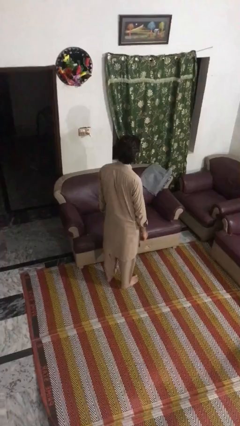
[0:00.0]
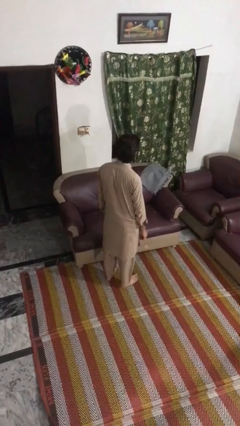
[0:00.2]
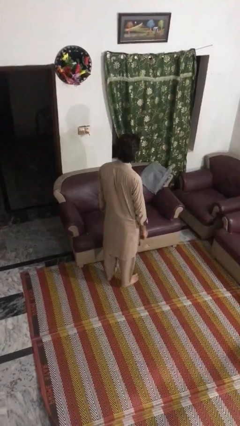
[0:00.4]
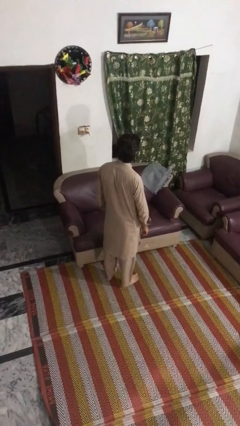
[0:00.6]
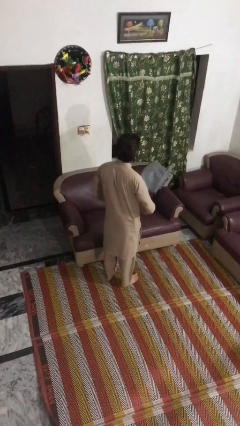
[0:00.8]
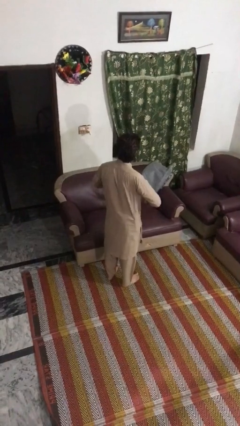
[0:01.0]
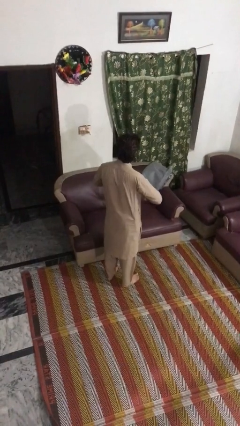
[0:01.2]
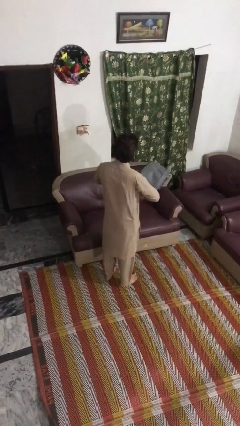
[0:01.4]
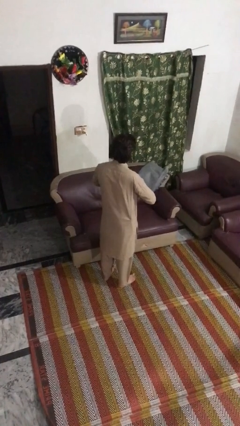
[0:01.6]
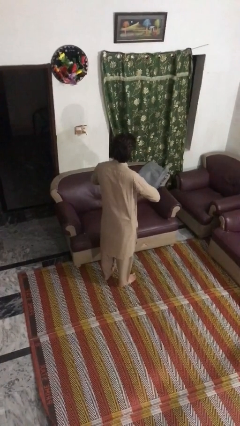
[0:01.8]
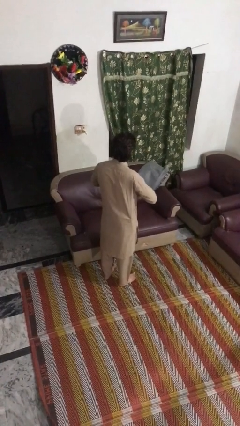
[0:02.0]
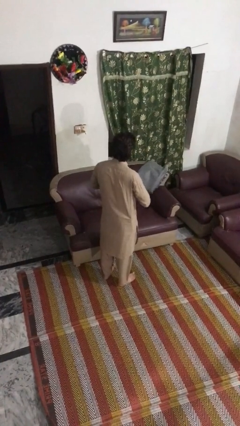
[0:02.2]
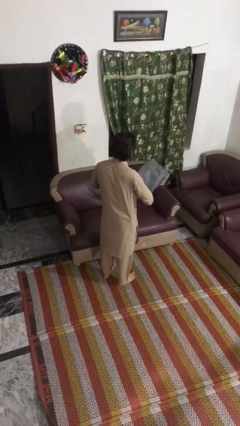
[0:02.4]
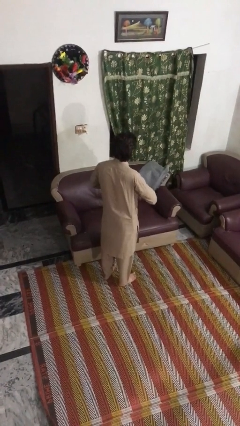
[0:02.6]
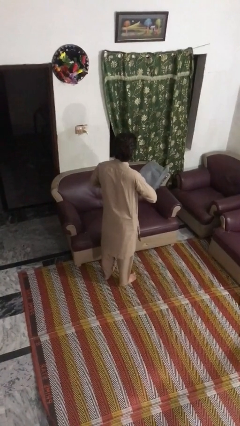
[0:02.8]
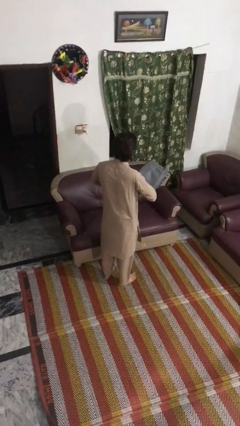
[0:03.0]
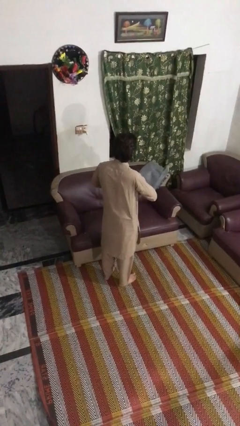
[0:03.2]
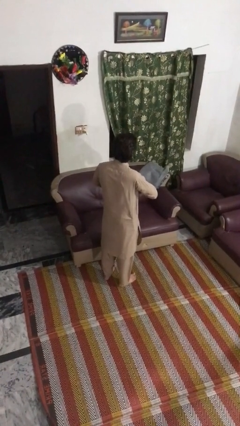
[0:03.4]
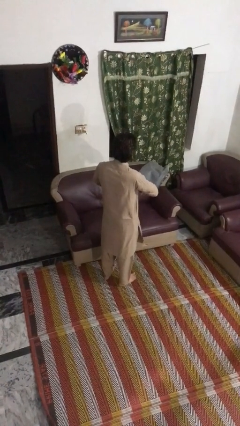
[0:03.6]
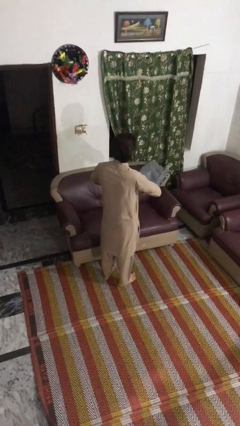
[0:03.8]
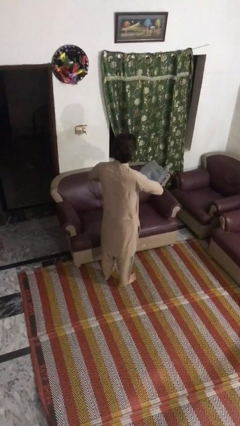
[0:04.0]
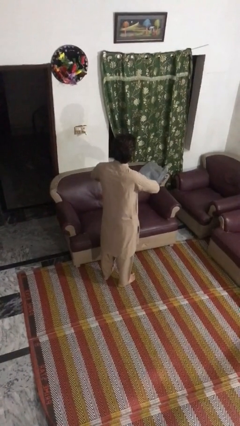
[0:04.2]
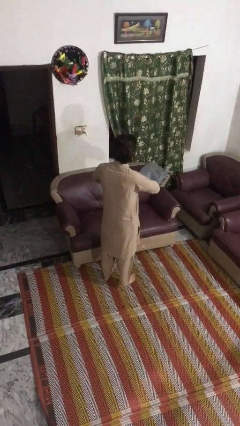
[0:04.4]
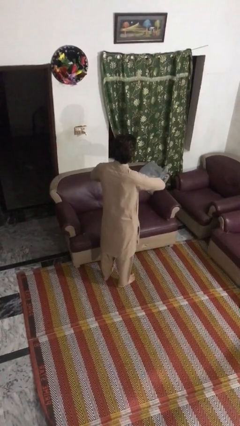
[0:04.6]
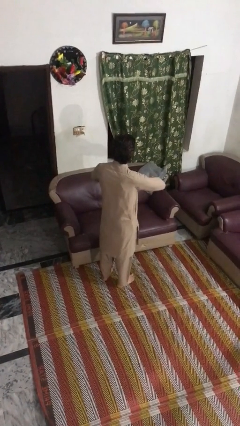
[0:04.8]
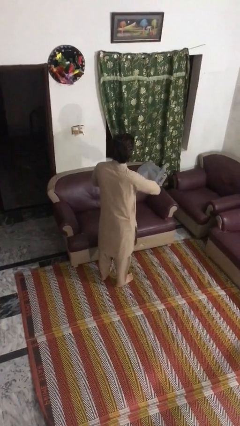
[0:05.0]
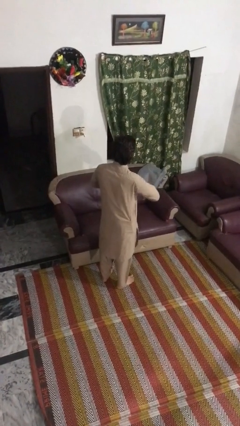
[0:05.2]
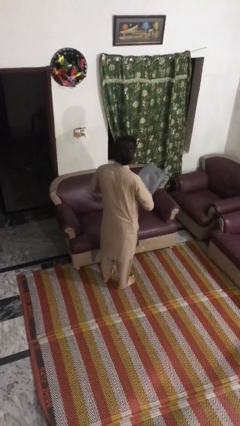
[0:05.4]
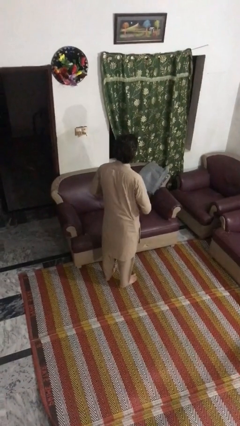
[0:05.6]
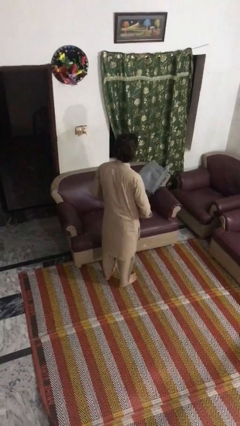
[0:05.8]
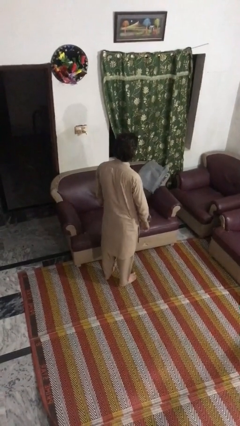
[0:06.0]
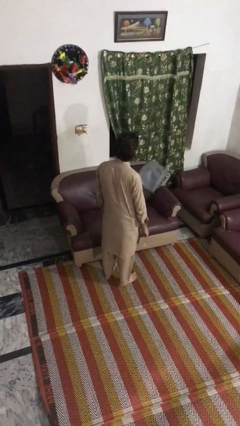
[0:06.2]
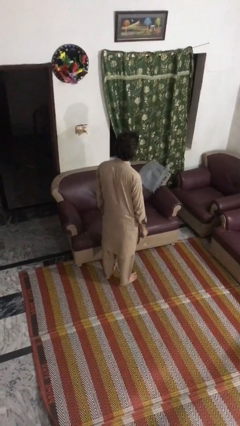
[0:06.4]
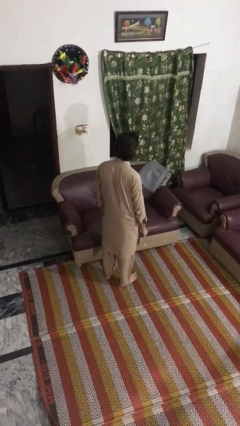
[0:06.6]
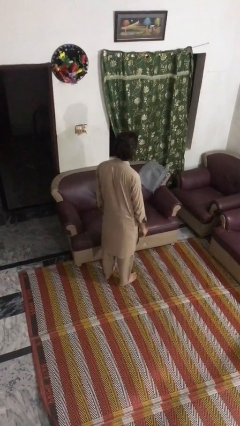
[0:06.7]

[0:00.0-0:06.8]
person cracks knuckles

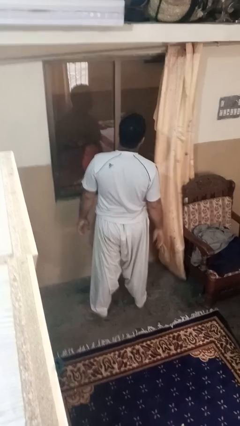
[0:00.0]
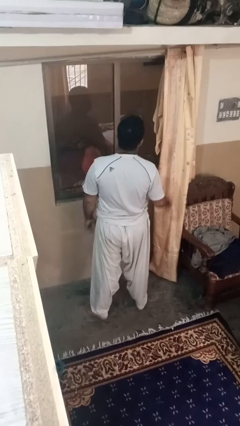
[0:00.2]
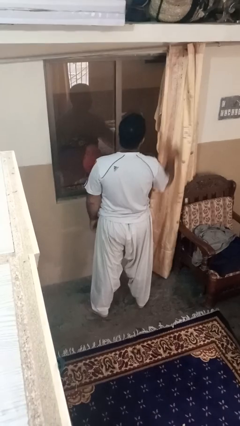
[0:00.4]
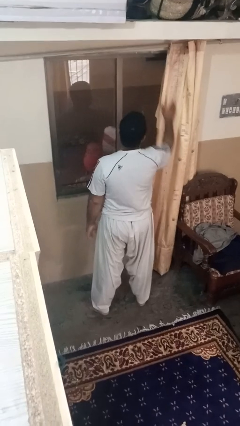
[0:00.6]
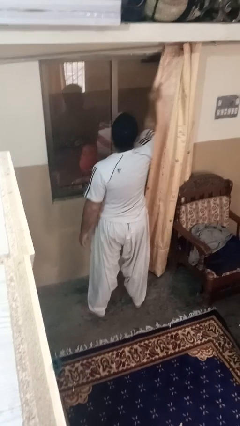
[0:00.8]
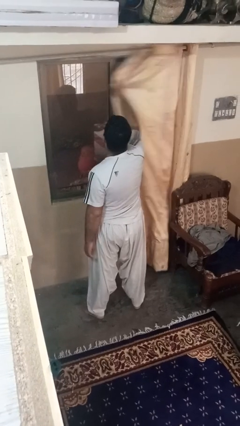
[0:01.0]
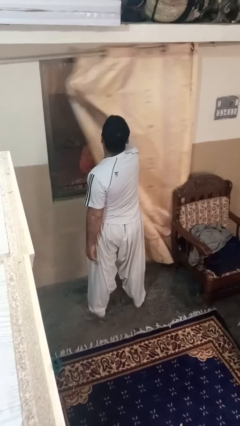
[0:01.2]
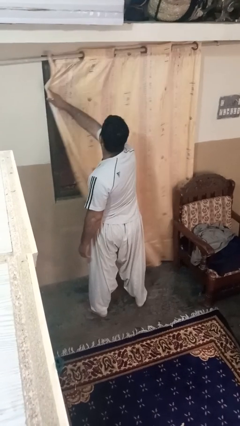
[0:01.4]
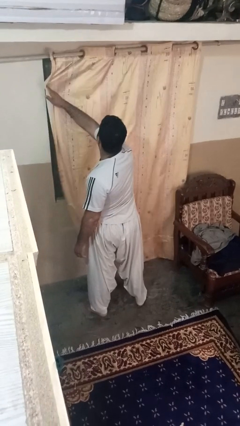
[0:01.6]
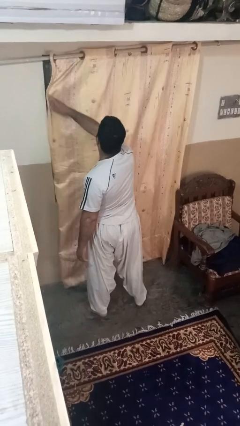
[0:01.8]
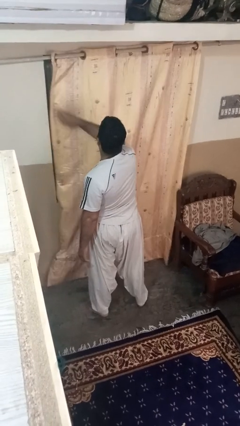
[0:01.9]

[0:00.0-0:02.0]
person closes curtains

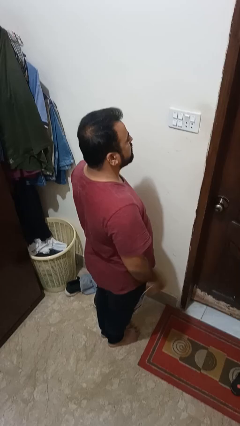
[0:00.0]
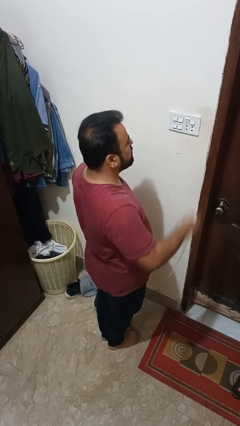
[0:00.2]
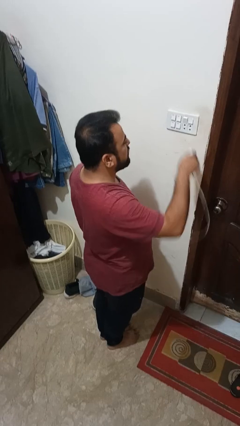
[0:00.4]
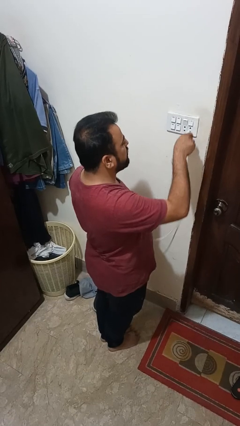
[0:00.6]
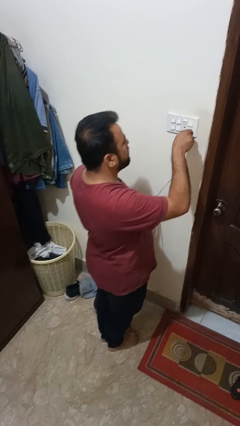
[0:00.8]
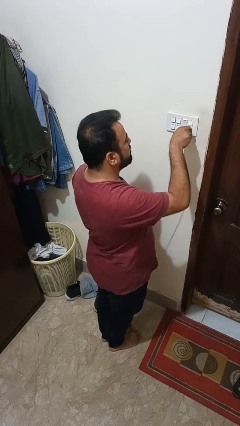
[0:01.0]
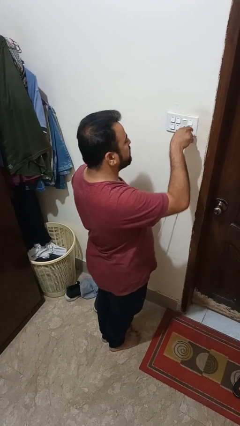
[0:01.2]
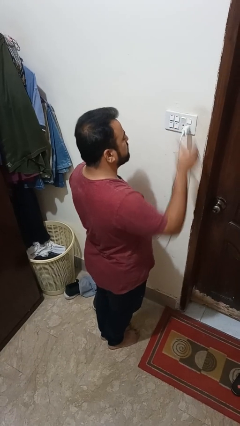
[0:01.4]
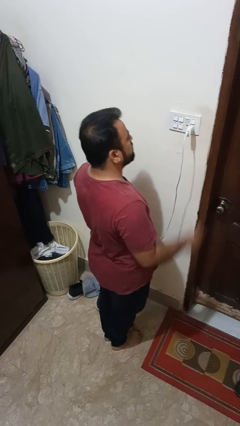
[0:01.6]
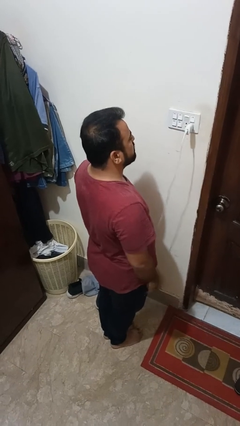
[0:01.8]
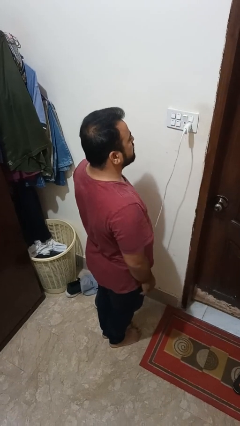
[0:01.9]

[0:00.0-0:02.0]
person plugs into electrical socket

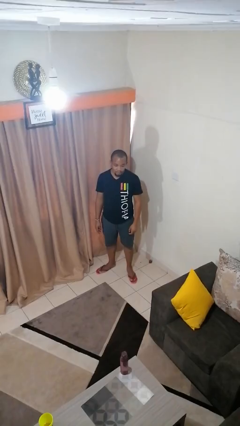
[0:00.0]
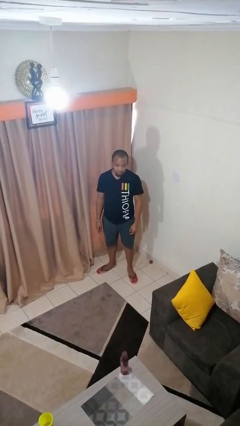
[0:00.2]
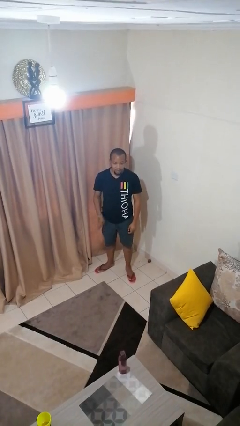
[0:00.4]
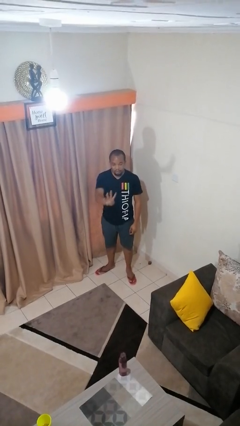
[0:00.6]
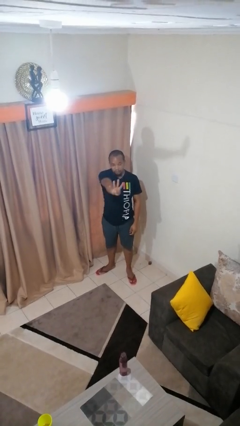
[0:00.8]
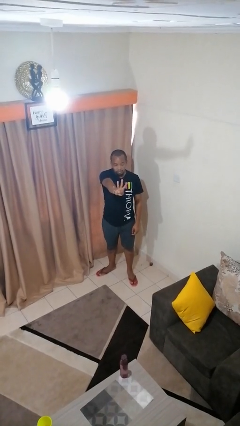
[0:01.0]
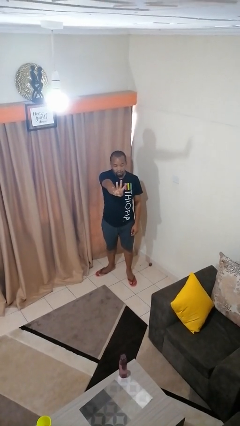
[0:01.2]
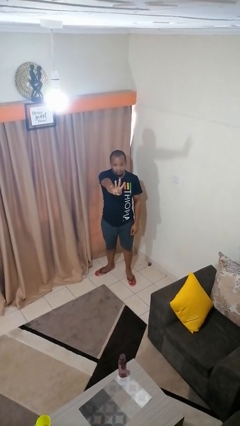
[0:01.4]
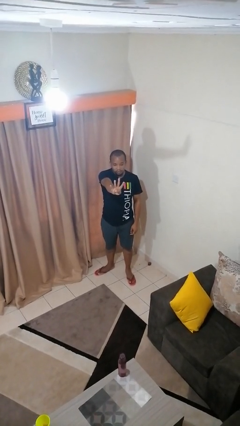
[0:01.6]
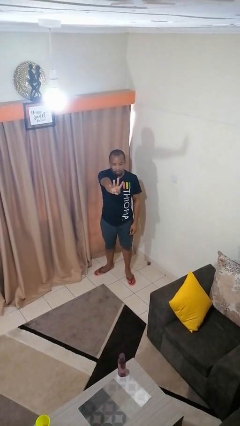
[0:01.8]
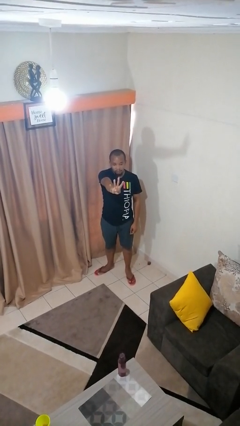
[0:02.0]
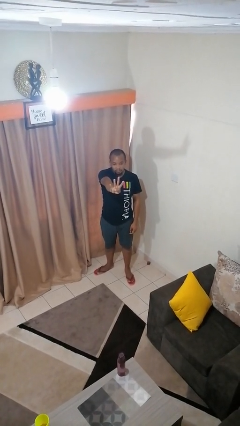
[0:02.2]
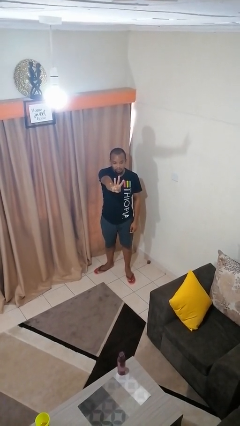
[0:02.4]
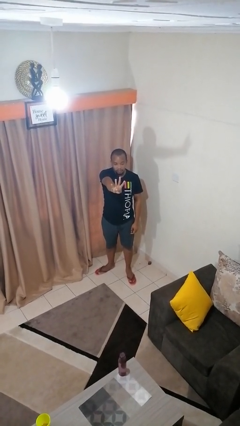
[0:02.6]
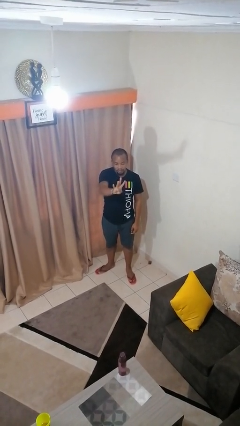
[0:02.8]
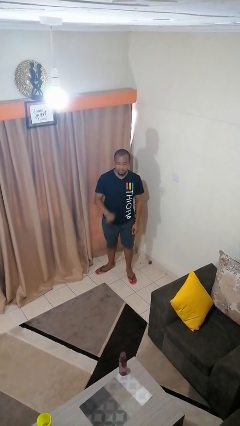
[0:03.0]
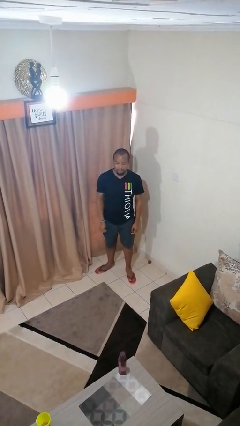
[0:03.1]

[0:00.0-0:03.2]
person gestures number four

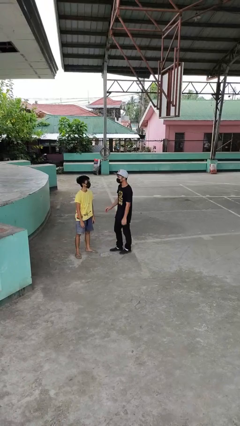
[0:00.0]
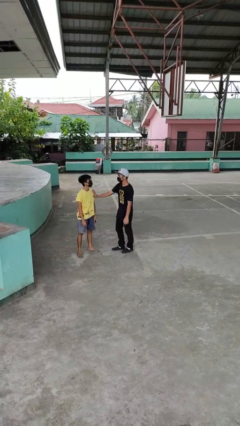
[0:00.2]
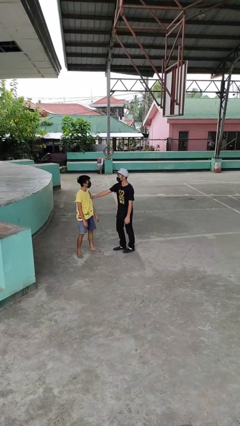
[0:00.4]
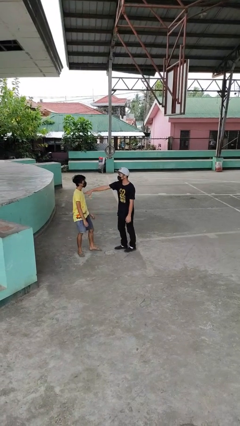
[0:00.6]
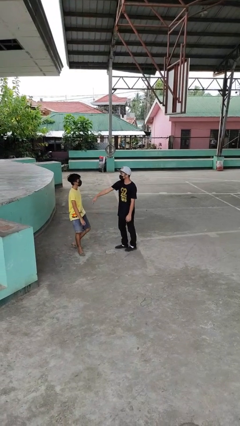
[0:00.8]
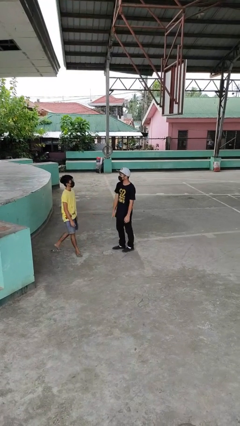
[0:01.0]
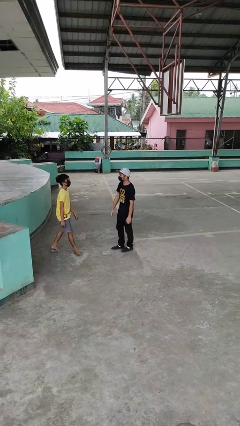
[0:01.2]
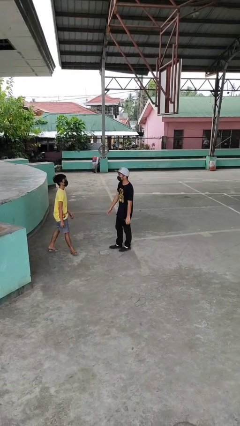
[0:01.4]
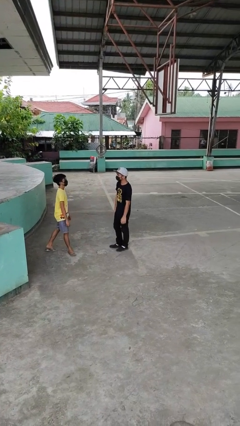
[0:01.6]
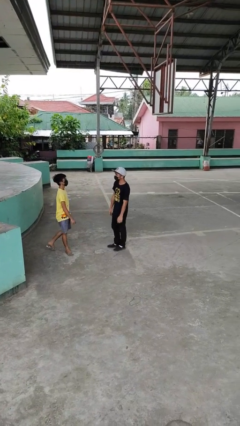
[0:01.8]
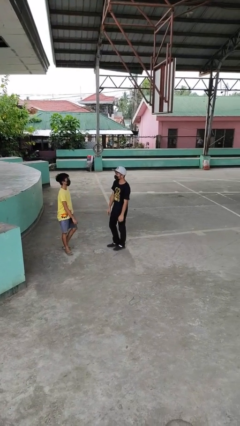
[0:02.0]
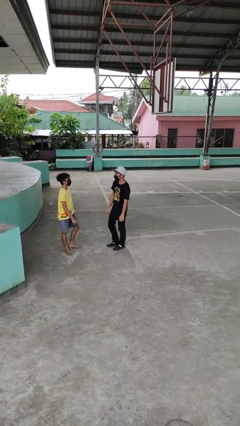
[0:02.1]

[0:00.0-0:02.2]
person shoves person

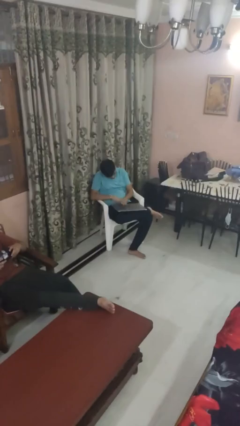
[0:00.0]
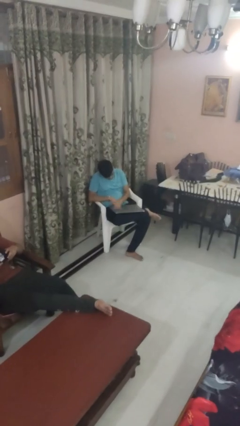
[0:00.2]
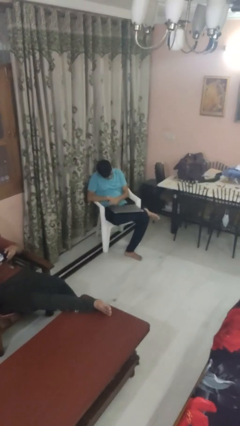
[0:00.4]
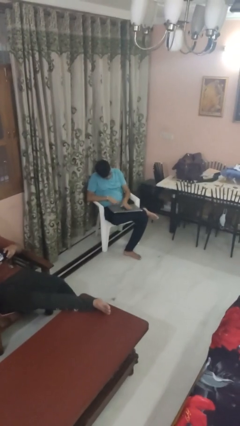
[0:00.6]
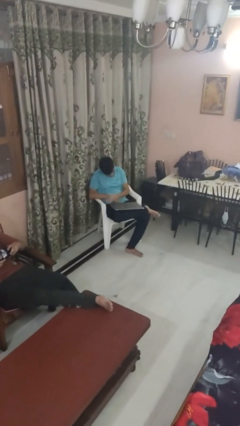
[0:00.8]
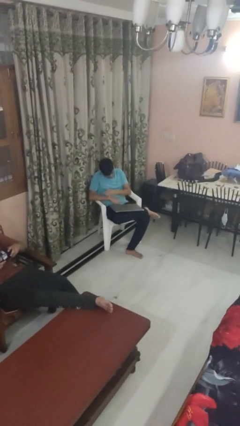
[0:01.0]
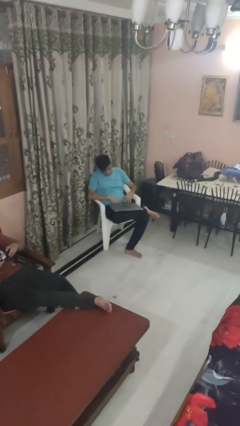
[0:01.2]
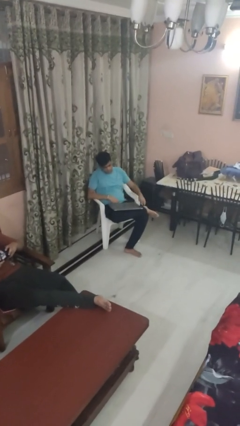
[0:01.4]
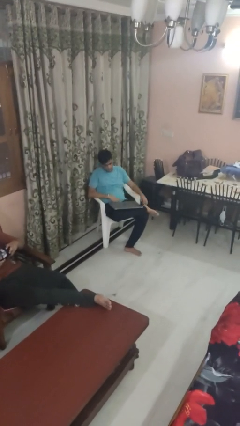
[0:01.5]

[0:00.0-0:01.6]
person waves hand over object
